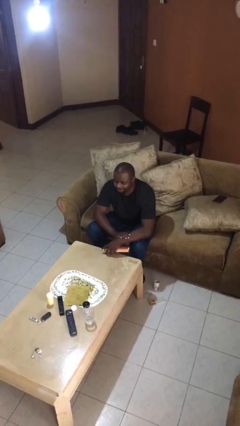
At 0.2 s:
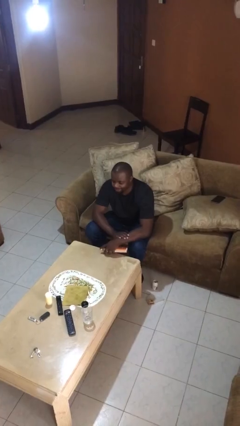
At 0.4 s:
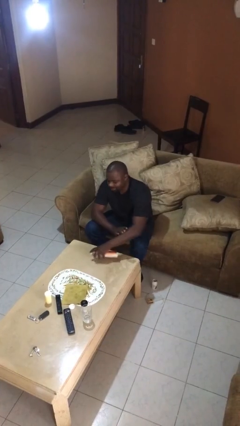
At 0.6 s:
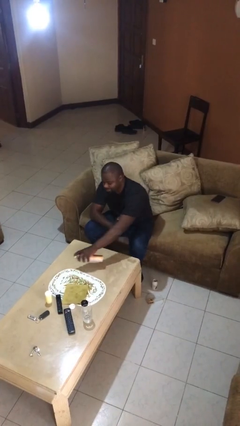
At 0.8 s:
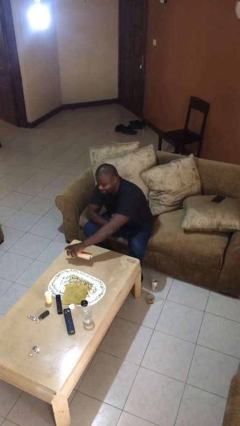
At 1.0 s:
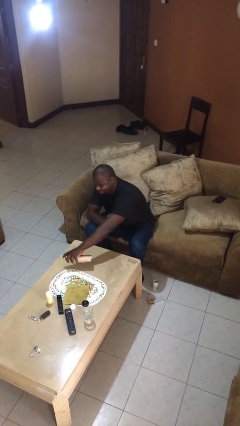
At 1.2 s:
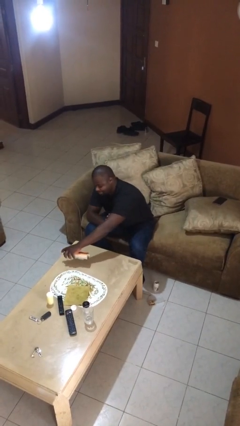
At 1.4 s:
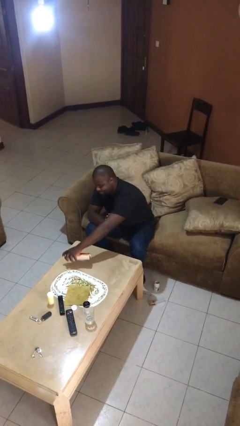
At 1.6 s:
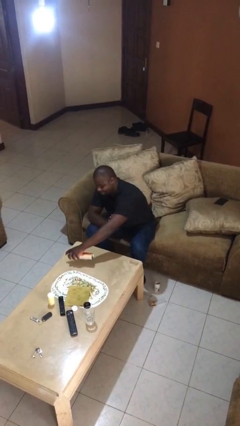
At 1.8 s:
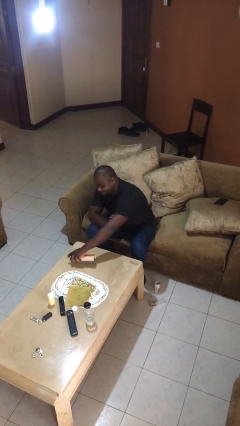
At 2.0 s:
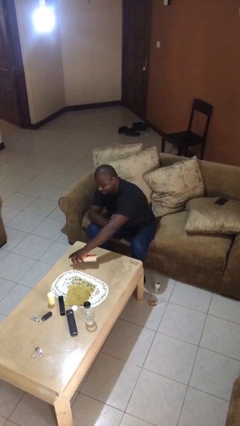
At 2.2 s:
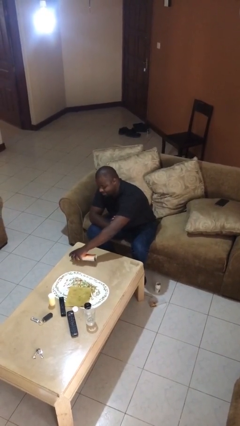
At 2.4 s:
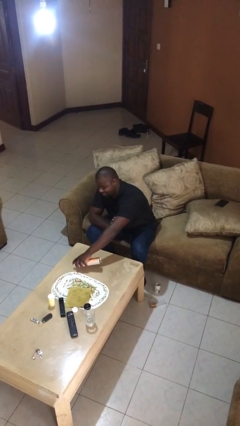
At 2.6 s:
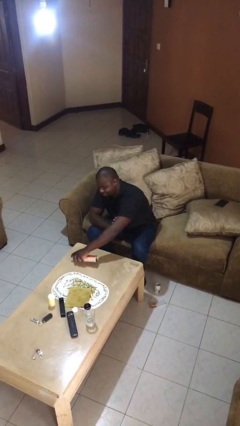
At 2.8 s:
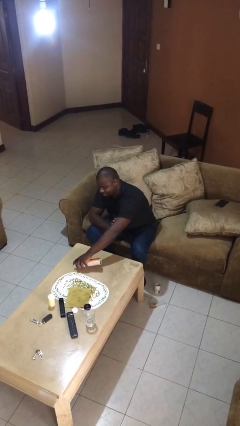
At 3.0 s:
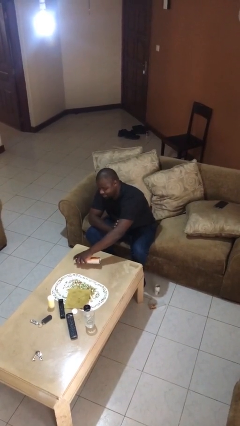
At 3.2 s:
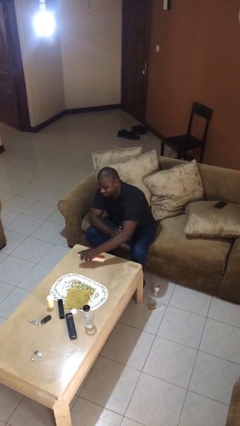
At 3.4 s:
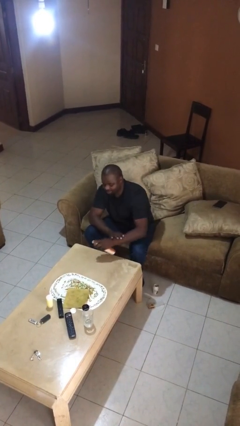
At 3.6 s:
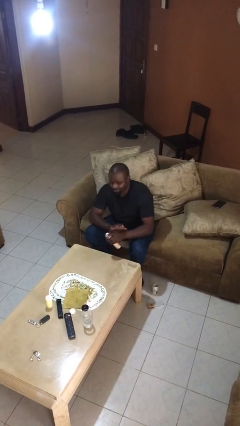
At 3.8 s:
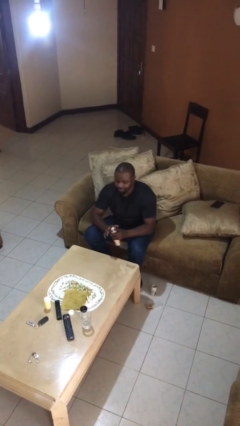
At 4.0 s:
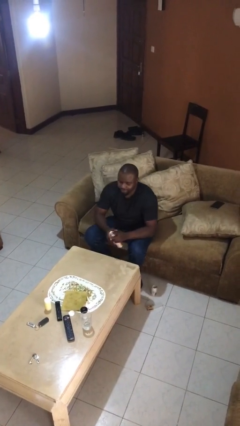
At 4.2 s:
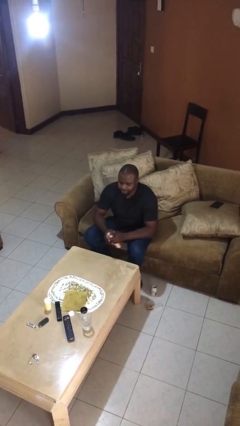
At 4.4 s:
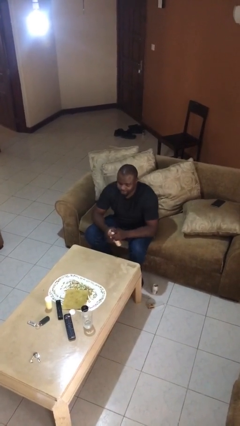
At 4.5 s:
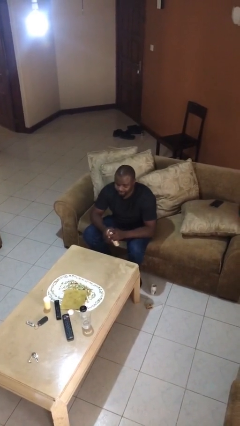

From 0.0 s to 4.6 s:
person sprays from bottle

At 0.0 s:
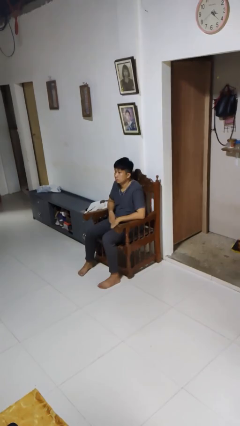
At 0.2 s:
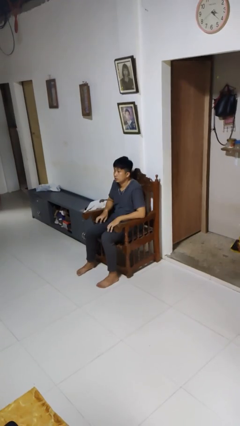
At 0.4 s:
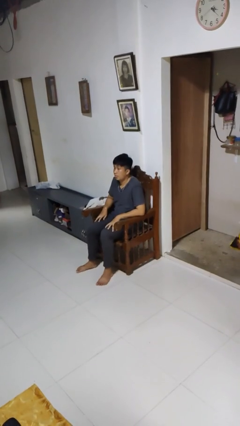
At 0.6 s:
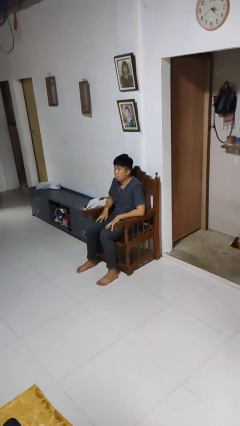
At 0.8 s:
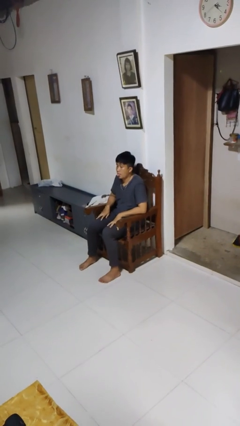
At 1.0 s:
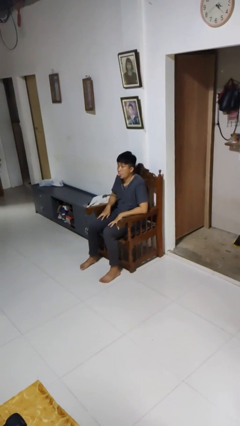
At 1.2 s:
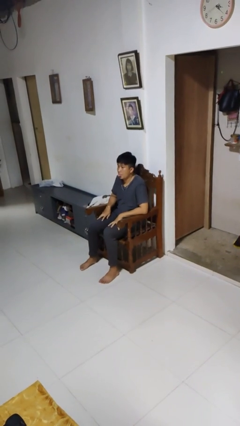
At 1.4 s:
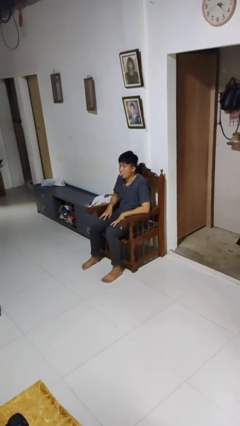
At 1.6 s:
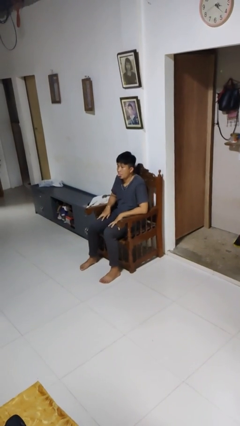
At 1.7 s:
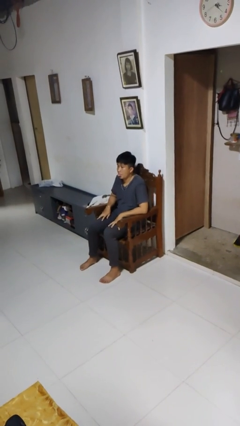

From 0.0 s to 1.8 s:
person sticks out tongue

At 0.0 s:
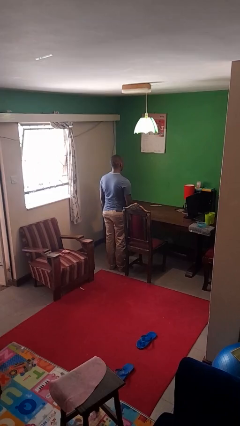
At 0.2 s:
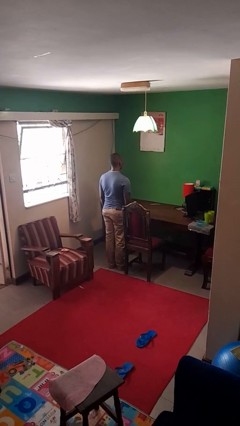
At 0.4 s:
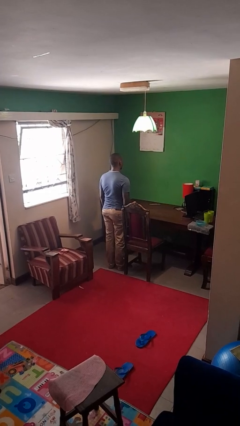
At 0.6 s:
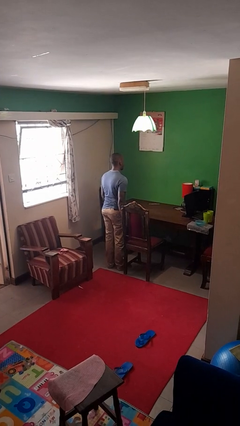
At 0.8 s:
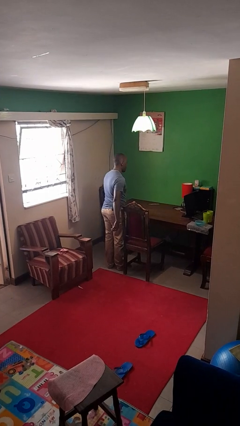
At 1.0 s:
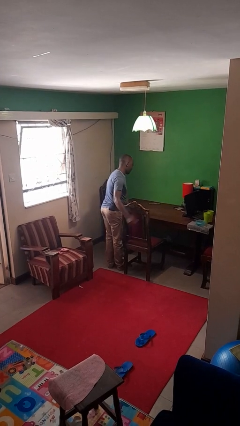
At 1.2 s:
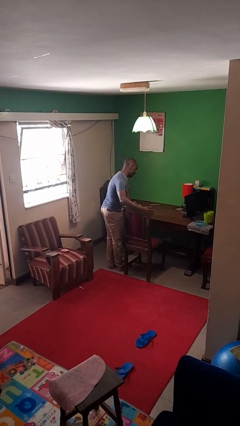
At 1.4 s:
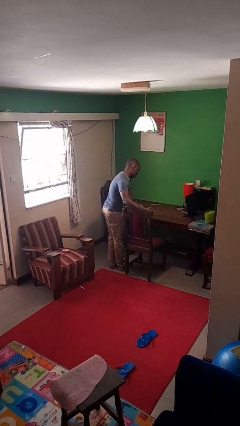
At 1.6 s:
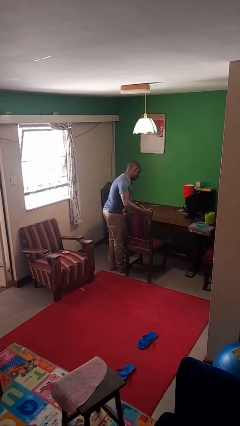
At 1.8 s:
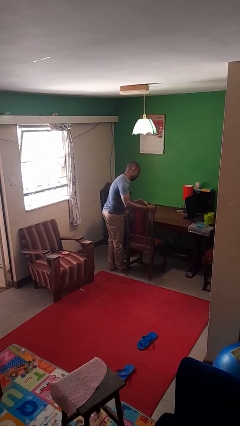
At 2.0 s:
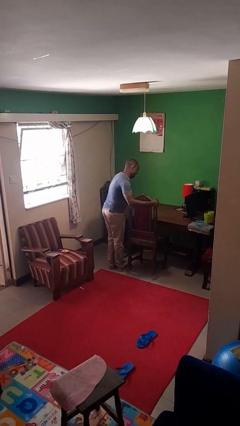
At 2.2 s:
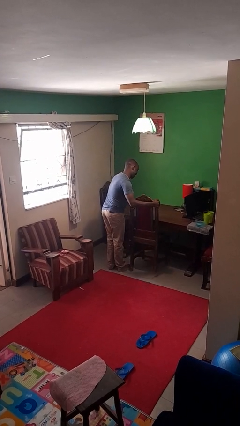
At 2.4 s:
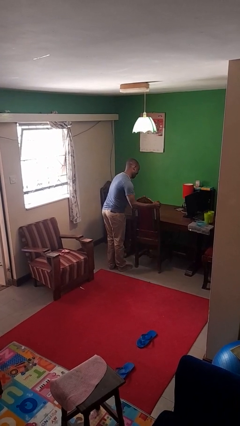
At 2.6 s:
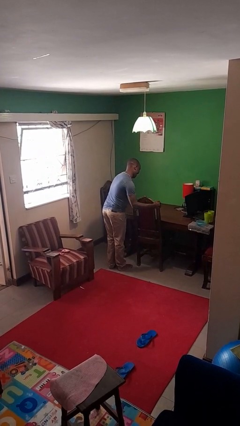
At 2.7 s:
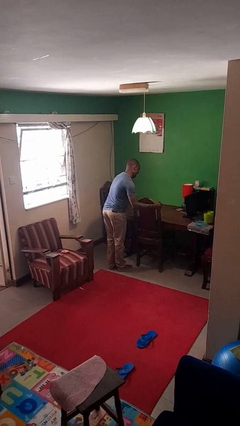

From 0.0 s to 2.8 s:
person pushes in chair

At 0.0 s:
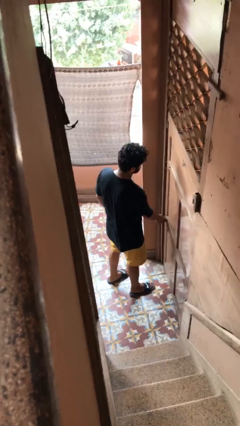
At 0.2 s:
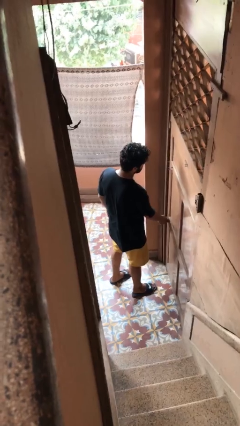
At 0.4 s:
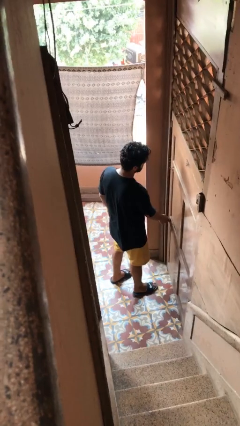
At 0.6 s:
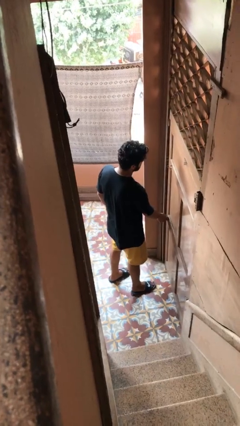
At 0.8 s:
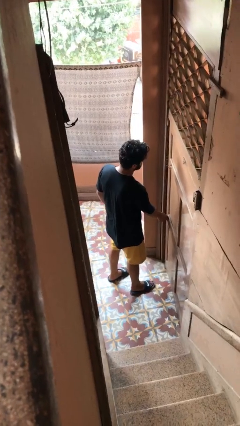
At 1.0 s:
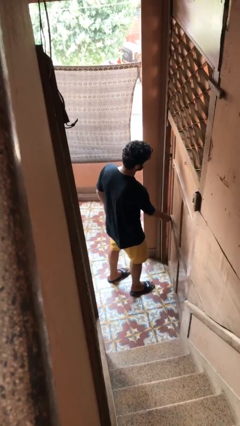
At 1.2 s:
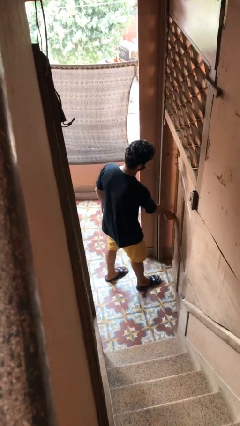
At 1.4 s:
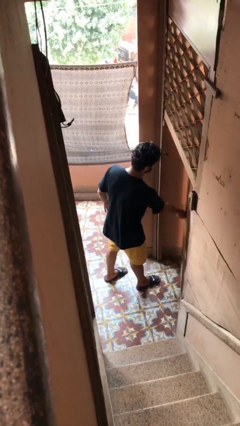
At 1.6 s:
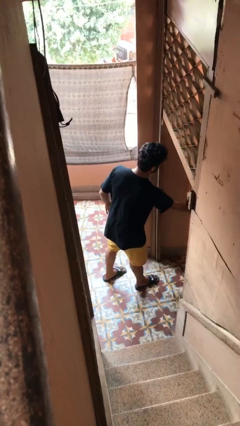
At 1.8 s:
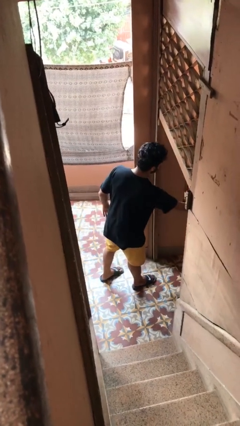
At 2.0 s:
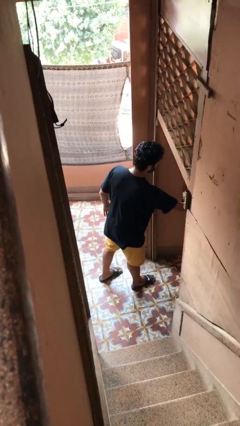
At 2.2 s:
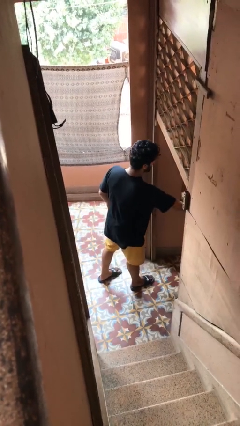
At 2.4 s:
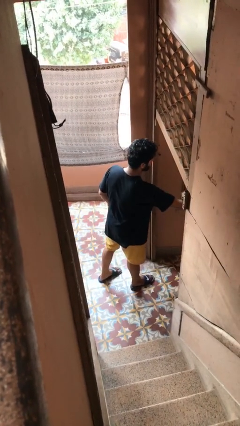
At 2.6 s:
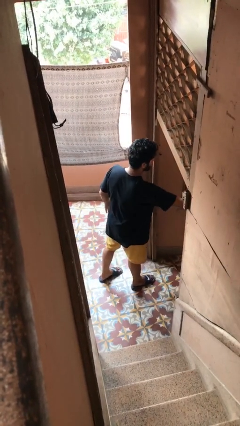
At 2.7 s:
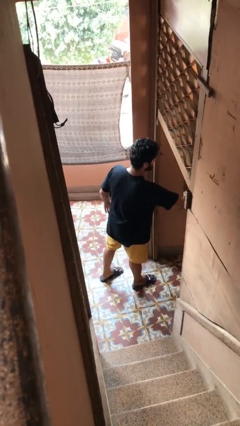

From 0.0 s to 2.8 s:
person opens gate

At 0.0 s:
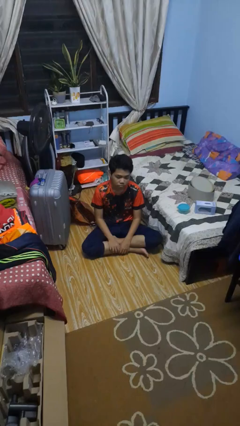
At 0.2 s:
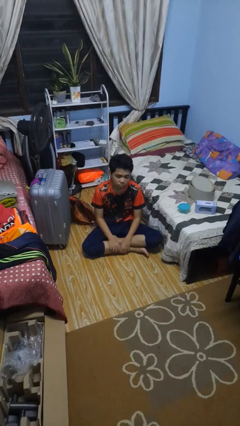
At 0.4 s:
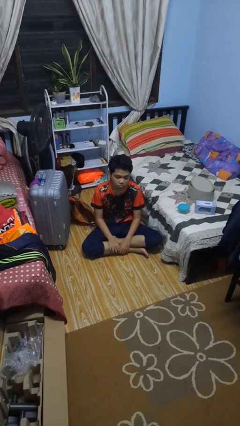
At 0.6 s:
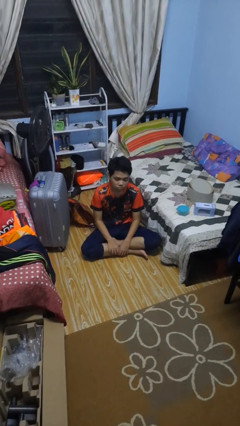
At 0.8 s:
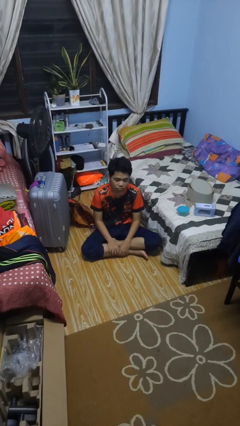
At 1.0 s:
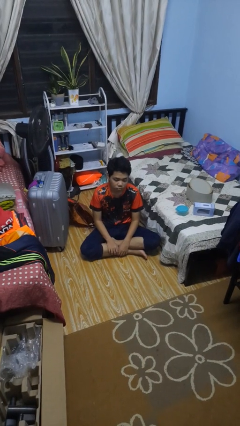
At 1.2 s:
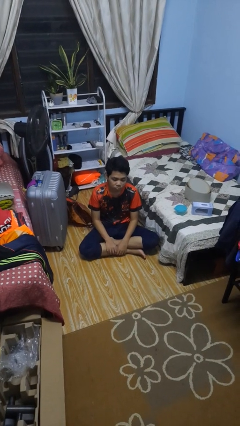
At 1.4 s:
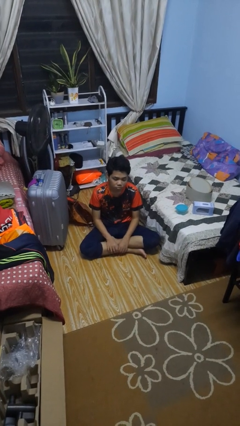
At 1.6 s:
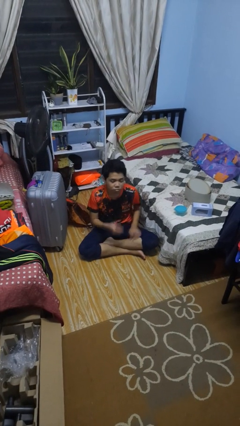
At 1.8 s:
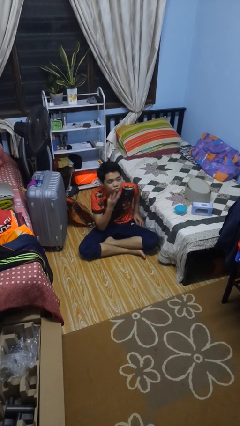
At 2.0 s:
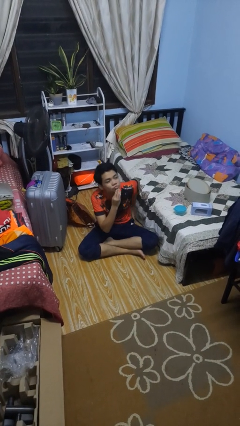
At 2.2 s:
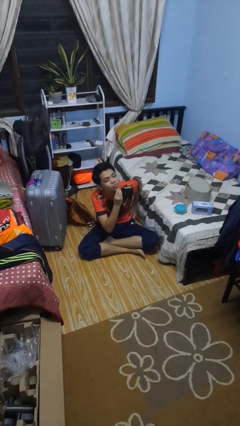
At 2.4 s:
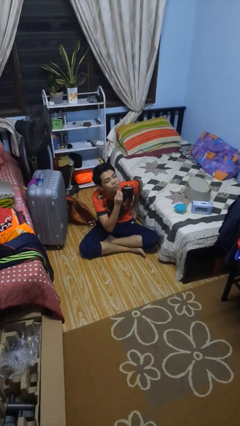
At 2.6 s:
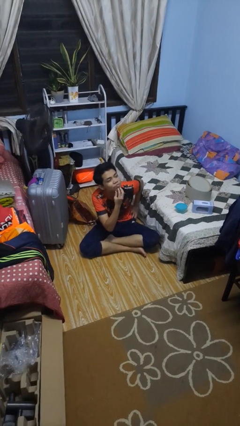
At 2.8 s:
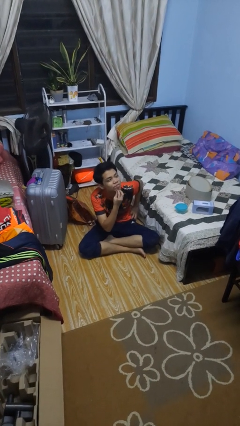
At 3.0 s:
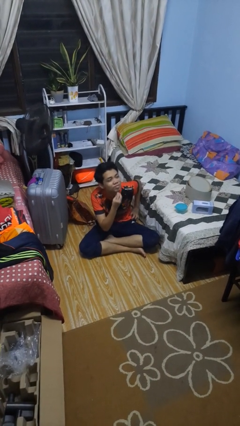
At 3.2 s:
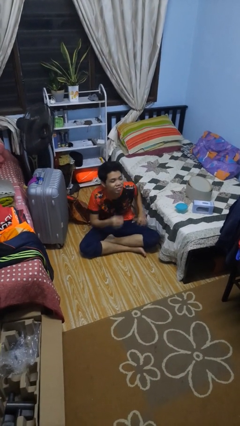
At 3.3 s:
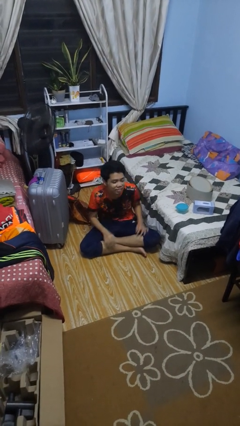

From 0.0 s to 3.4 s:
person strokes chin

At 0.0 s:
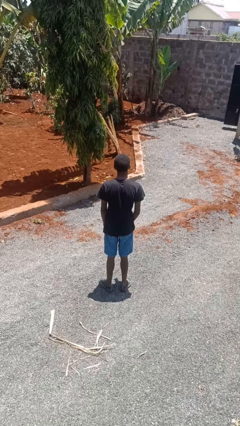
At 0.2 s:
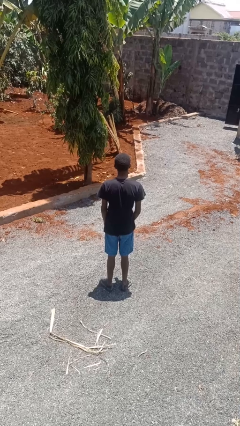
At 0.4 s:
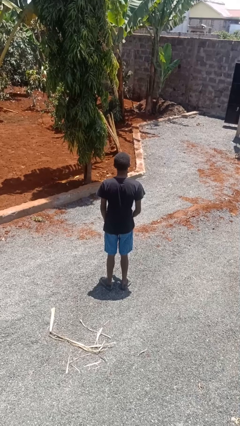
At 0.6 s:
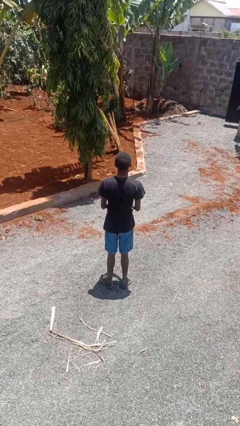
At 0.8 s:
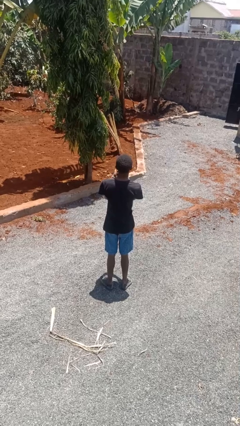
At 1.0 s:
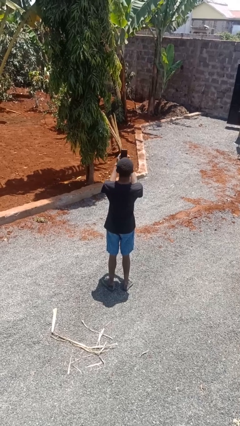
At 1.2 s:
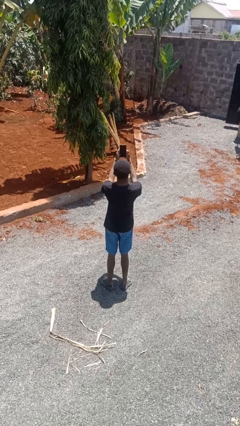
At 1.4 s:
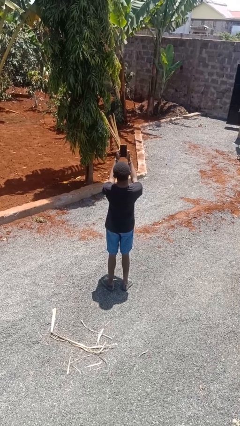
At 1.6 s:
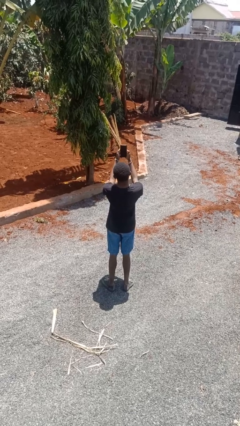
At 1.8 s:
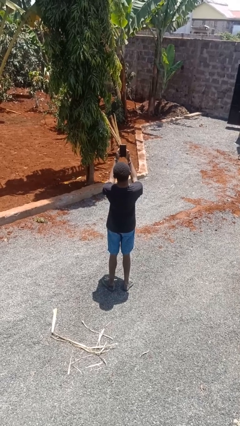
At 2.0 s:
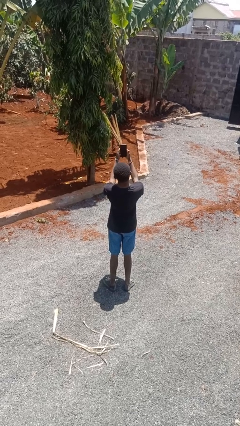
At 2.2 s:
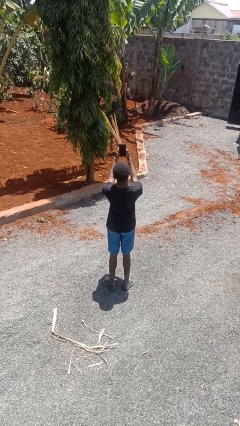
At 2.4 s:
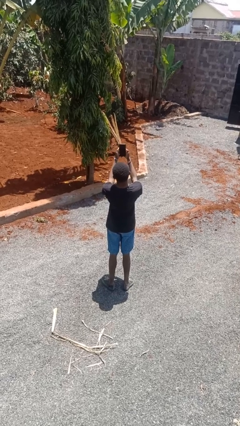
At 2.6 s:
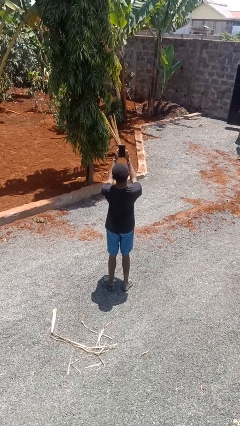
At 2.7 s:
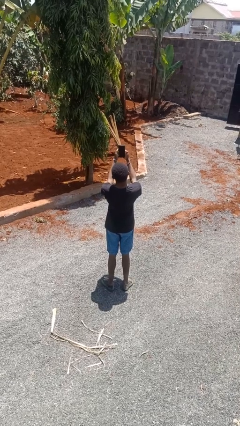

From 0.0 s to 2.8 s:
person takes selfie
